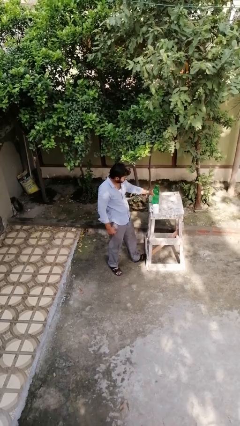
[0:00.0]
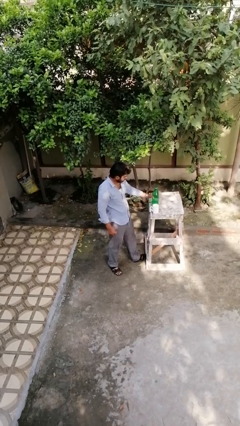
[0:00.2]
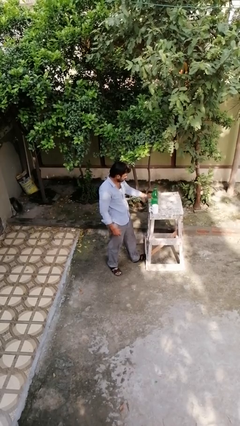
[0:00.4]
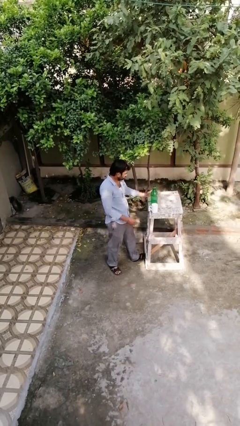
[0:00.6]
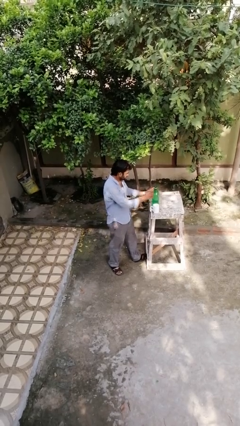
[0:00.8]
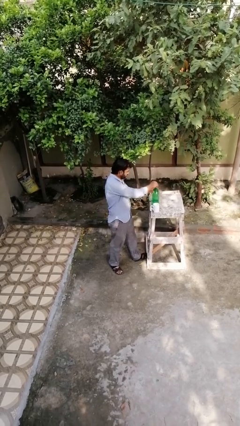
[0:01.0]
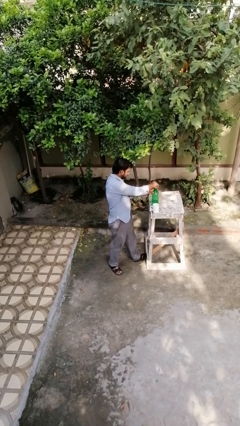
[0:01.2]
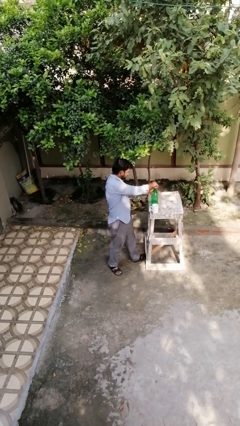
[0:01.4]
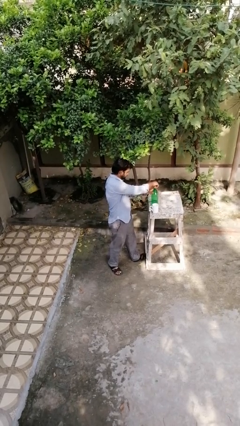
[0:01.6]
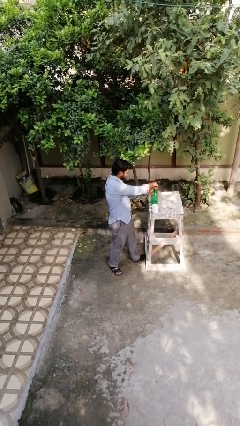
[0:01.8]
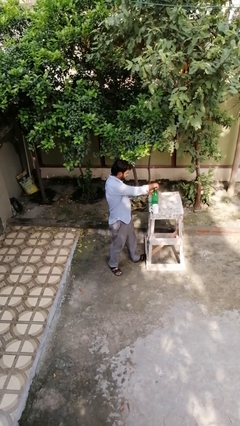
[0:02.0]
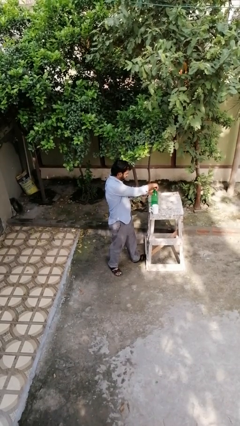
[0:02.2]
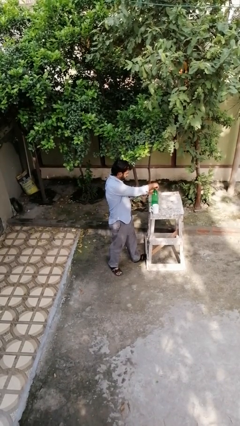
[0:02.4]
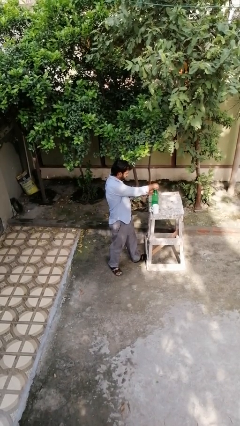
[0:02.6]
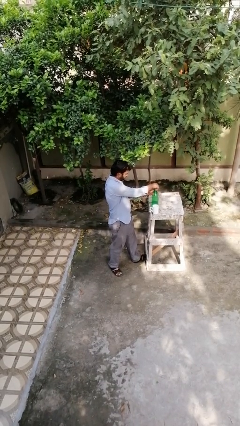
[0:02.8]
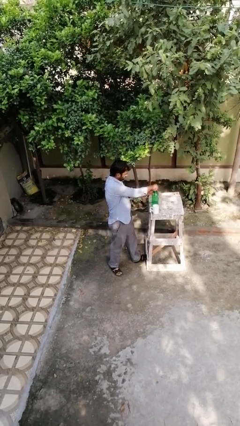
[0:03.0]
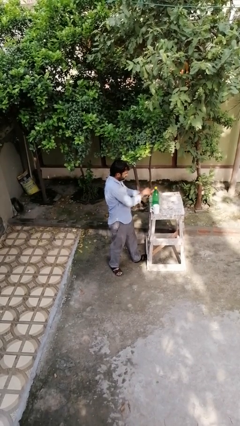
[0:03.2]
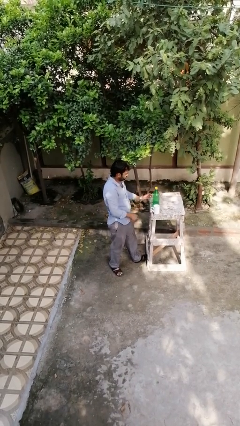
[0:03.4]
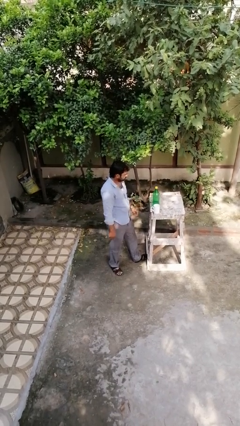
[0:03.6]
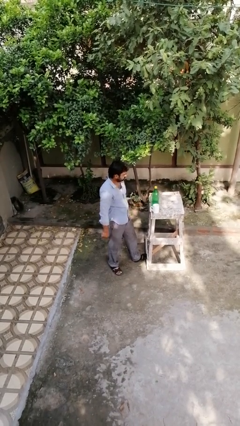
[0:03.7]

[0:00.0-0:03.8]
person screws lid to bottle

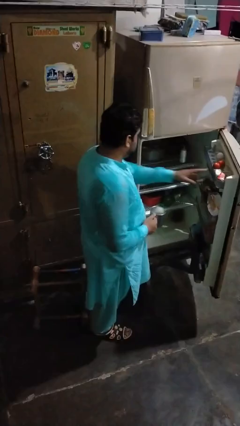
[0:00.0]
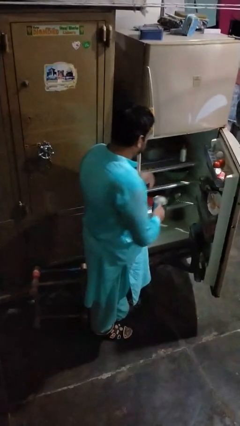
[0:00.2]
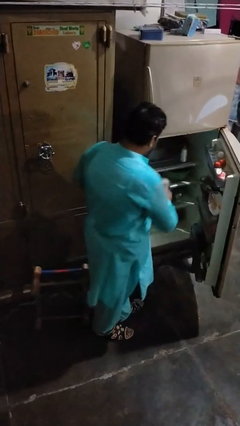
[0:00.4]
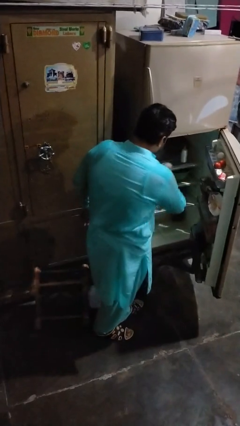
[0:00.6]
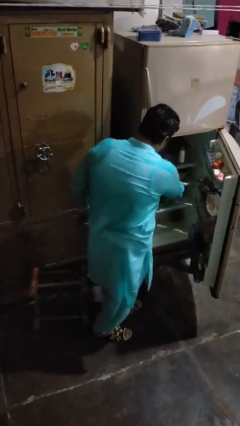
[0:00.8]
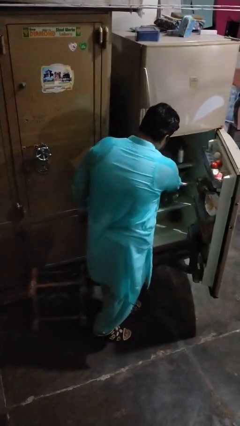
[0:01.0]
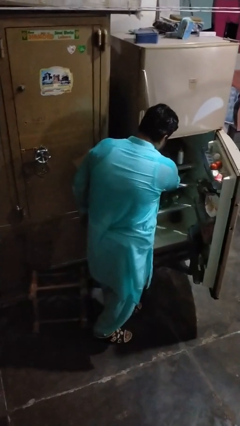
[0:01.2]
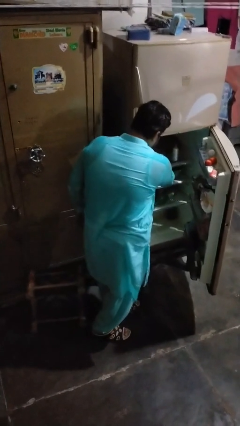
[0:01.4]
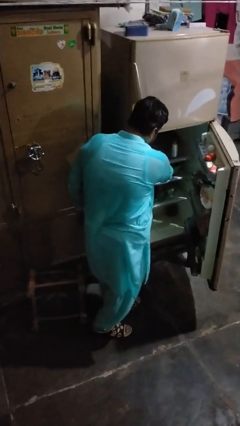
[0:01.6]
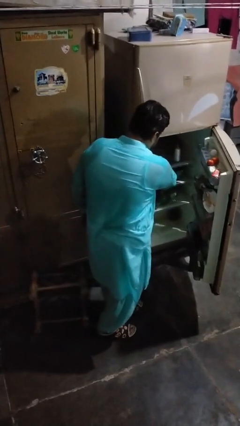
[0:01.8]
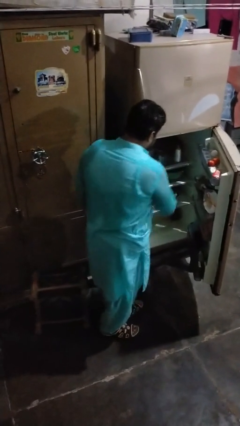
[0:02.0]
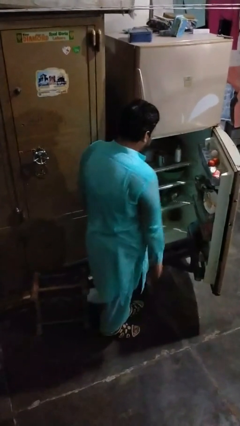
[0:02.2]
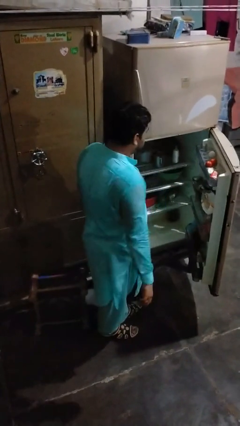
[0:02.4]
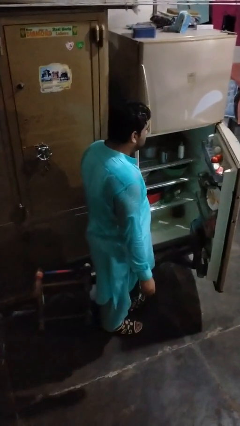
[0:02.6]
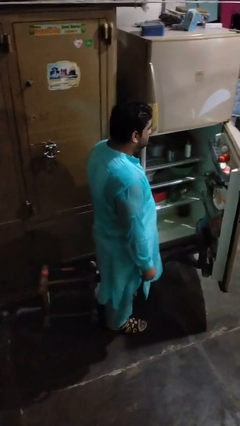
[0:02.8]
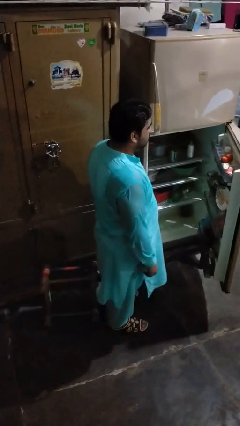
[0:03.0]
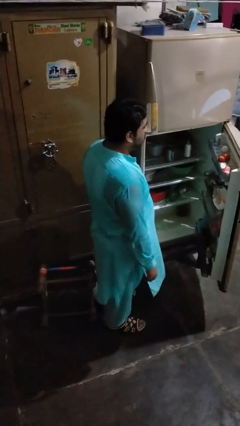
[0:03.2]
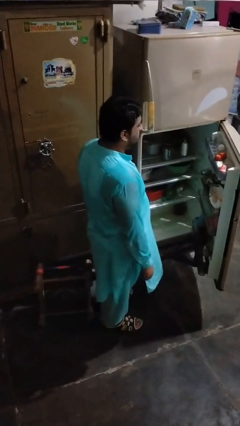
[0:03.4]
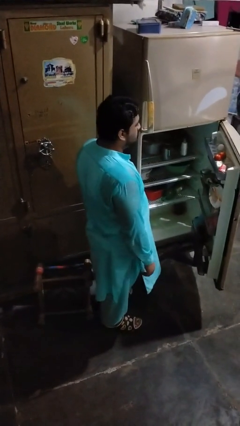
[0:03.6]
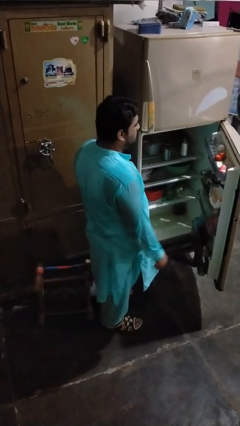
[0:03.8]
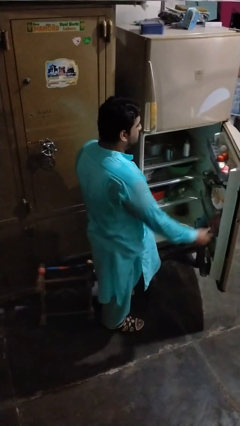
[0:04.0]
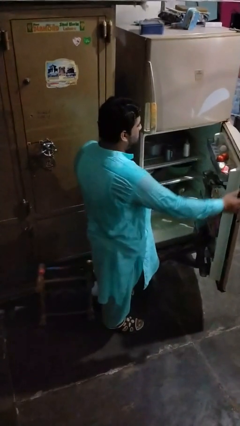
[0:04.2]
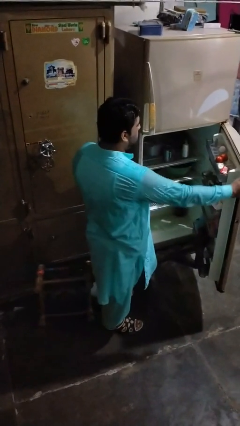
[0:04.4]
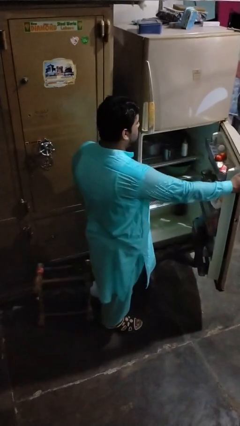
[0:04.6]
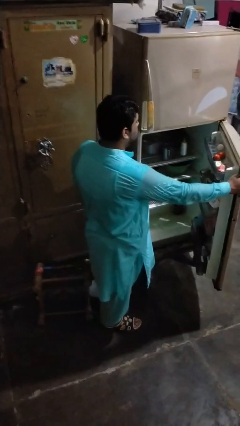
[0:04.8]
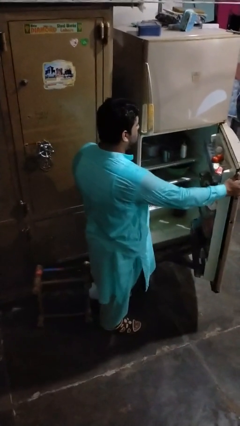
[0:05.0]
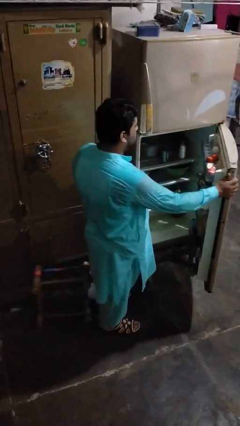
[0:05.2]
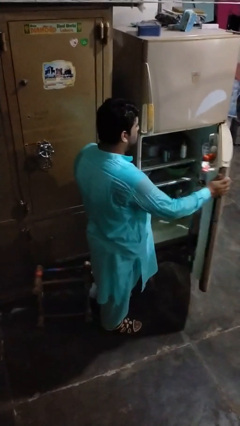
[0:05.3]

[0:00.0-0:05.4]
person puts object into refrigerator

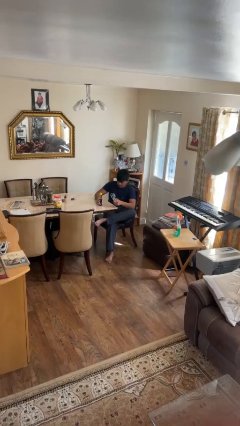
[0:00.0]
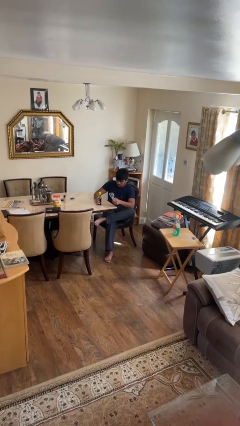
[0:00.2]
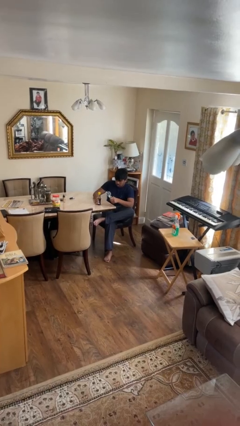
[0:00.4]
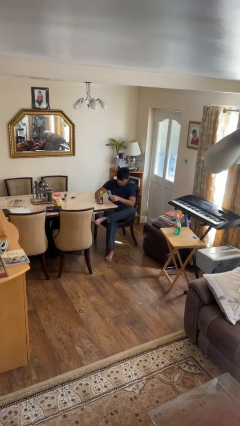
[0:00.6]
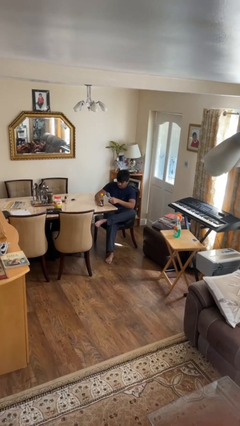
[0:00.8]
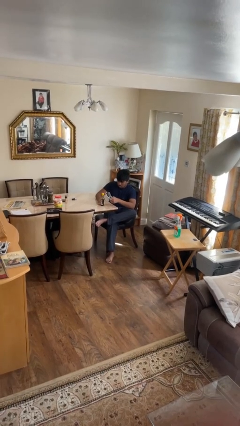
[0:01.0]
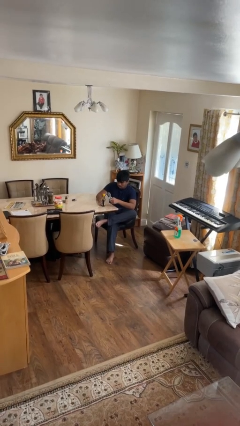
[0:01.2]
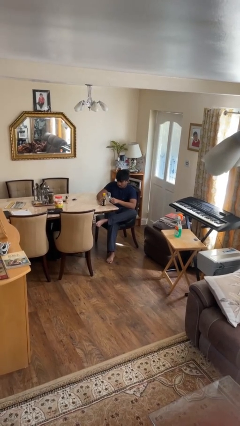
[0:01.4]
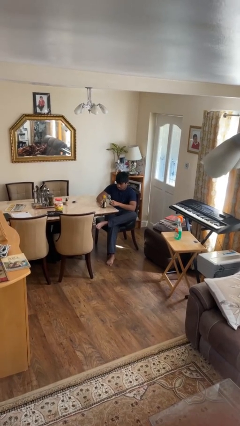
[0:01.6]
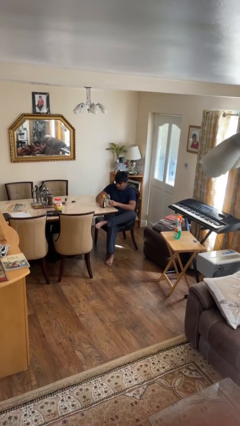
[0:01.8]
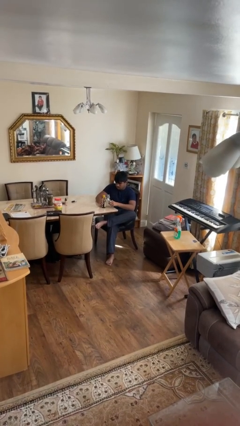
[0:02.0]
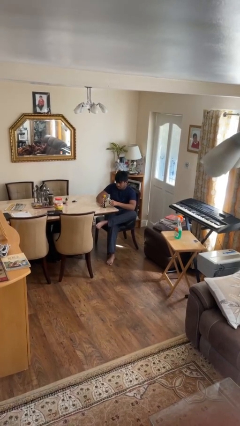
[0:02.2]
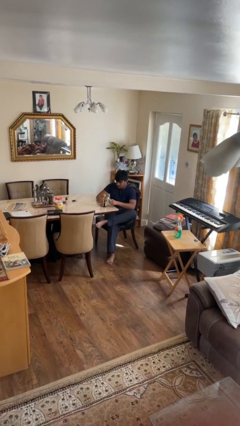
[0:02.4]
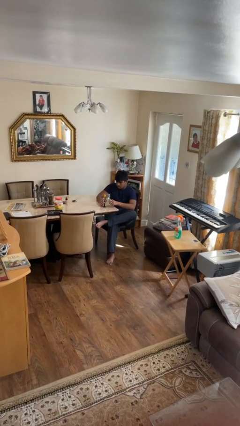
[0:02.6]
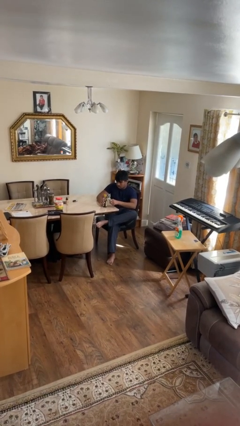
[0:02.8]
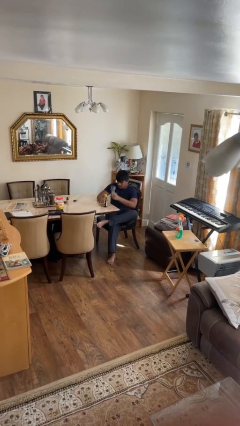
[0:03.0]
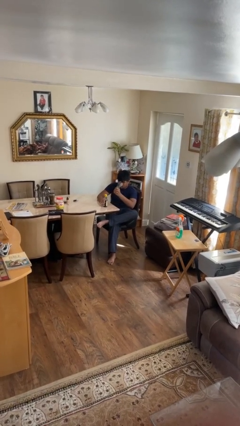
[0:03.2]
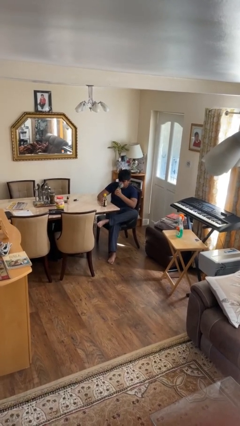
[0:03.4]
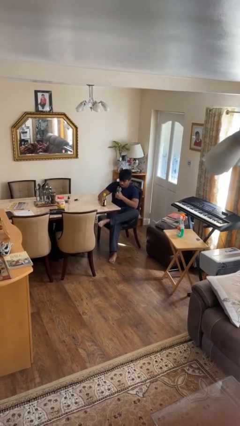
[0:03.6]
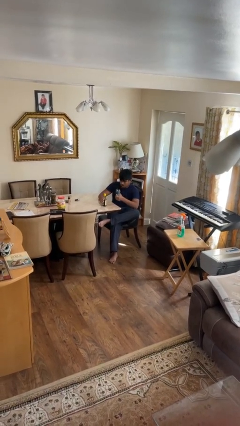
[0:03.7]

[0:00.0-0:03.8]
person opens can with can opener

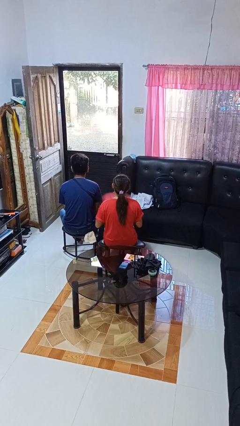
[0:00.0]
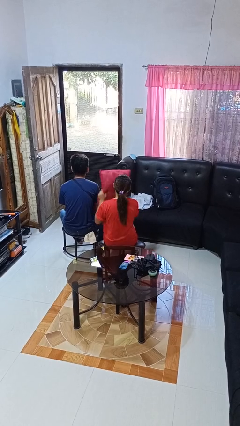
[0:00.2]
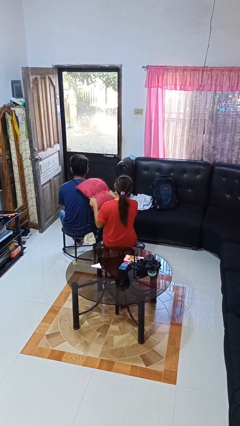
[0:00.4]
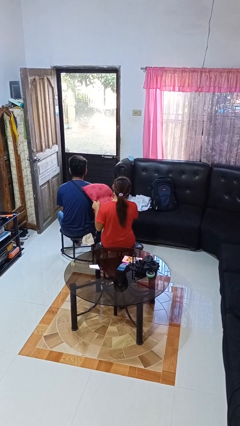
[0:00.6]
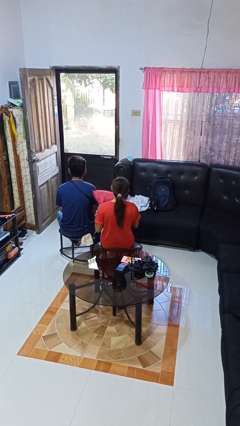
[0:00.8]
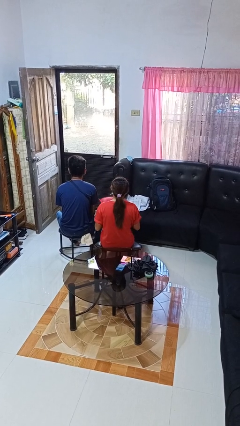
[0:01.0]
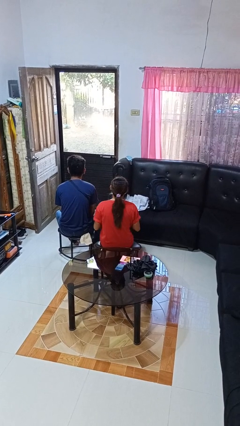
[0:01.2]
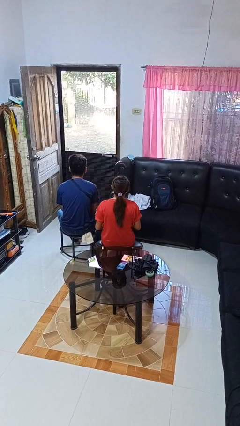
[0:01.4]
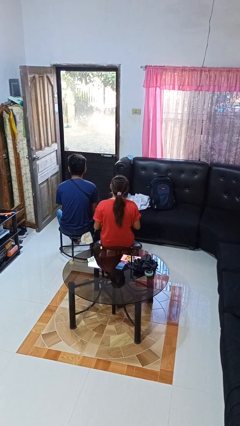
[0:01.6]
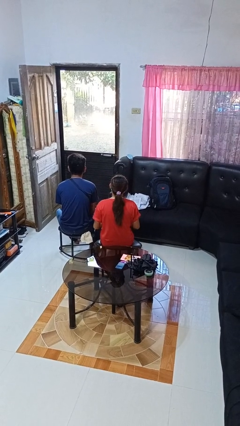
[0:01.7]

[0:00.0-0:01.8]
person hits person with pillow

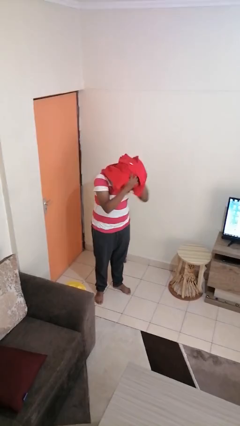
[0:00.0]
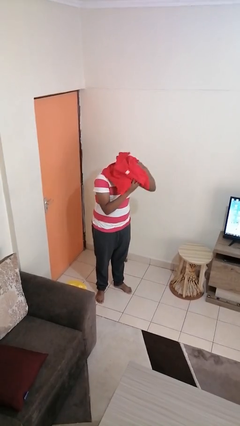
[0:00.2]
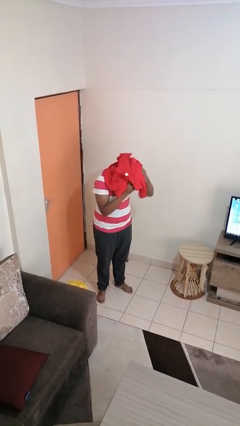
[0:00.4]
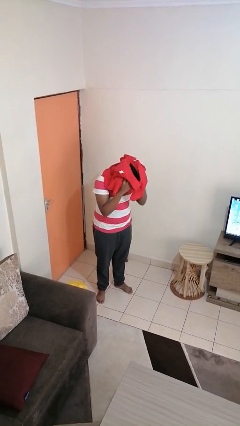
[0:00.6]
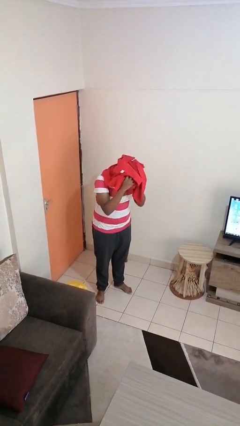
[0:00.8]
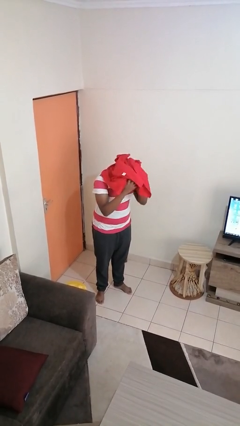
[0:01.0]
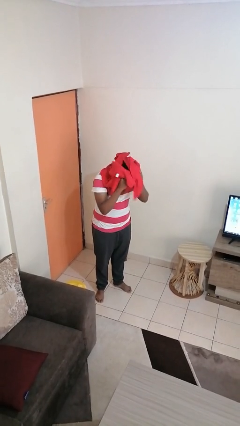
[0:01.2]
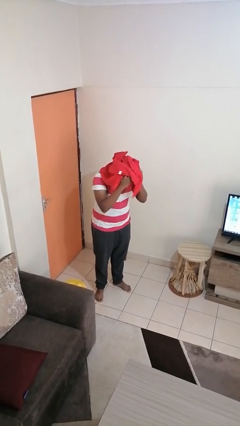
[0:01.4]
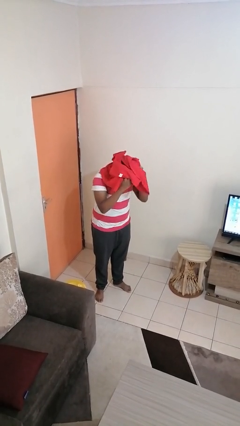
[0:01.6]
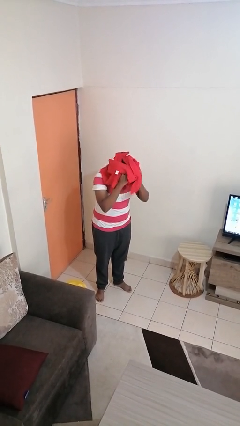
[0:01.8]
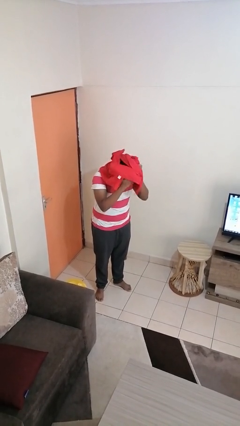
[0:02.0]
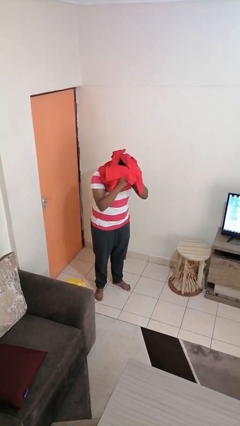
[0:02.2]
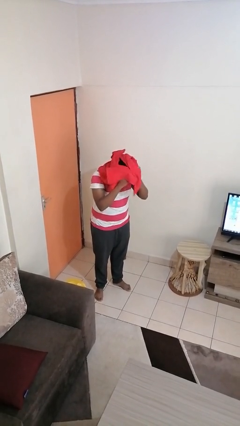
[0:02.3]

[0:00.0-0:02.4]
person dries hair with towel

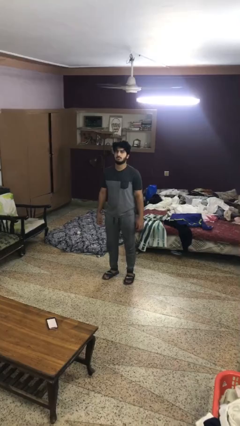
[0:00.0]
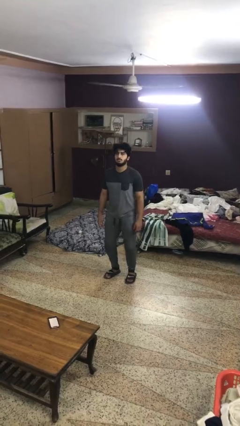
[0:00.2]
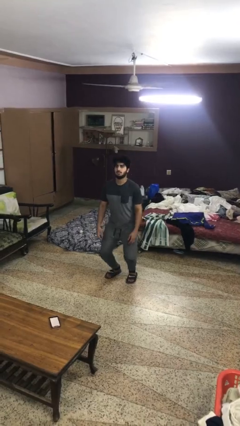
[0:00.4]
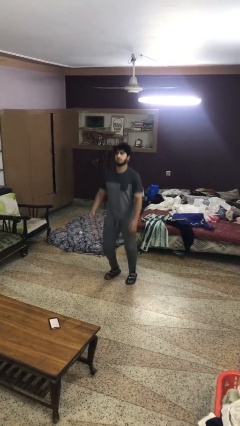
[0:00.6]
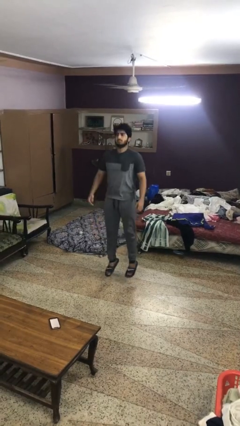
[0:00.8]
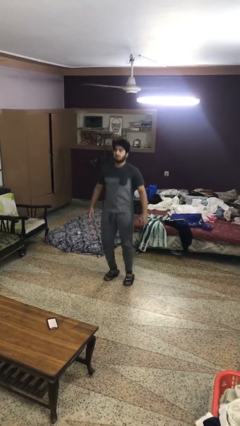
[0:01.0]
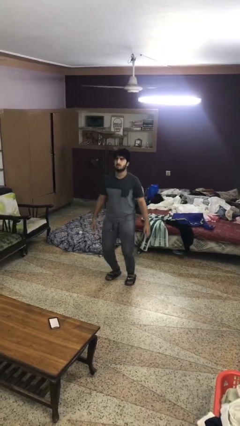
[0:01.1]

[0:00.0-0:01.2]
person jumps
